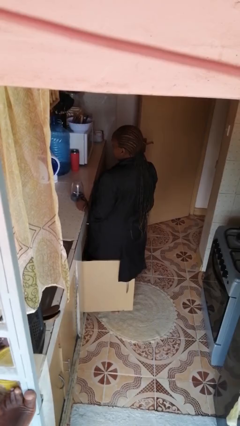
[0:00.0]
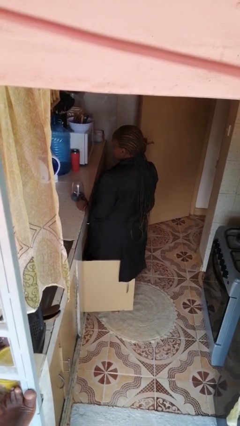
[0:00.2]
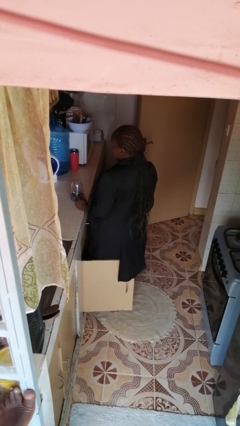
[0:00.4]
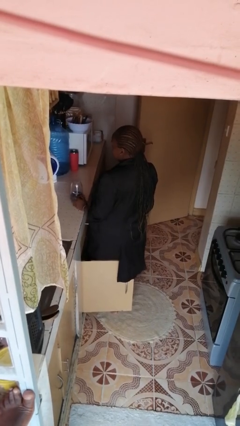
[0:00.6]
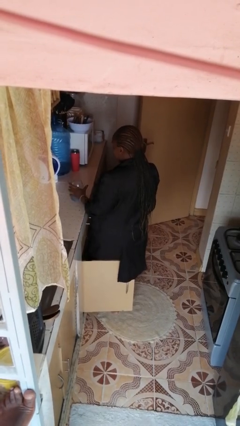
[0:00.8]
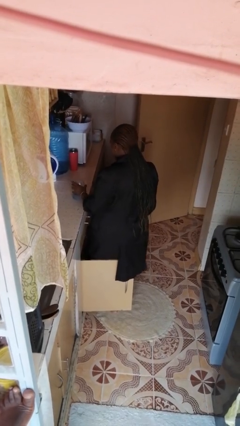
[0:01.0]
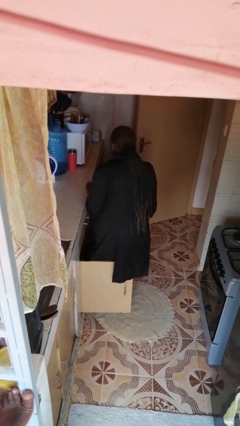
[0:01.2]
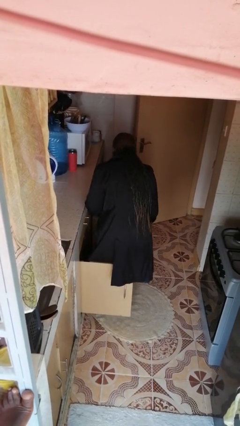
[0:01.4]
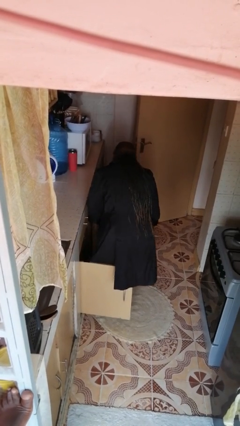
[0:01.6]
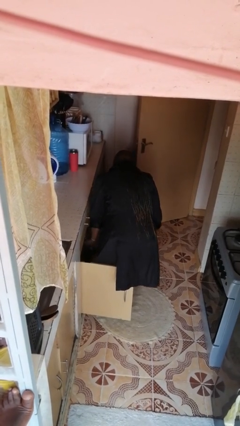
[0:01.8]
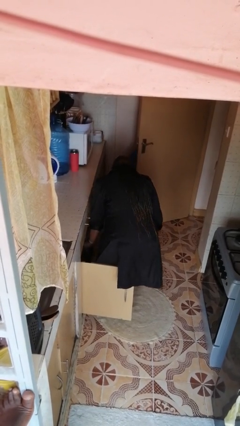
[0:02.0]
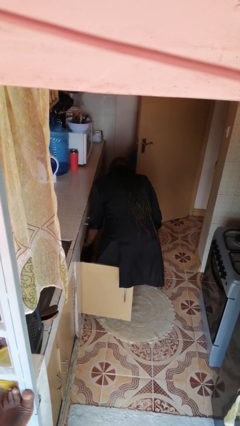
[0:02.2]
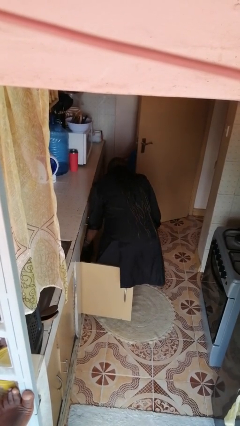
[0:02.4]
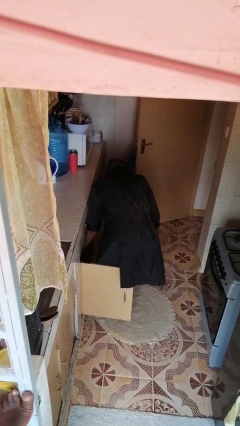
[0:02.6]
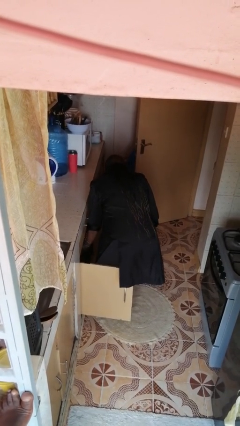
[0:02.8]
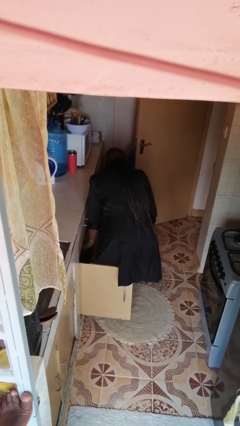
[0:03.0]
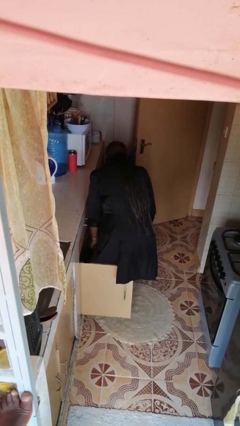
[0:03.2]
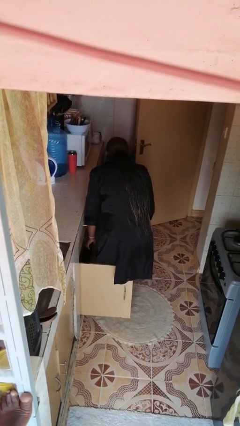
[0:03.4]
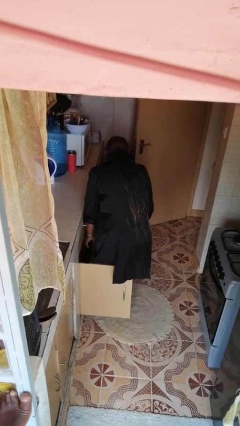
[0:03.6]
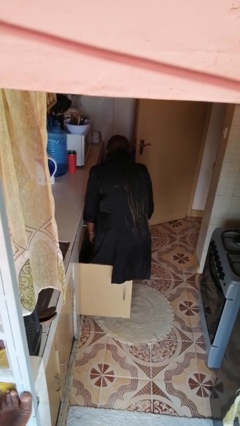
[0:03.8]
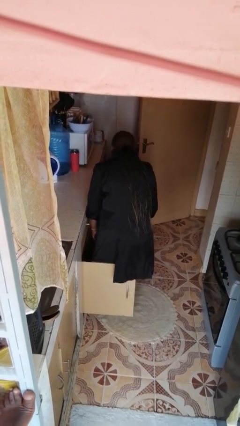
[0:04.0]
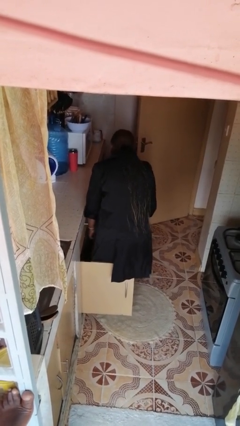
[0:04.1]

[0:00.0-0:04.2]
person puts object in cabinet

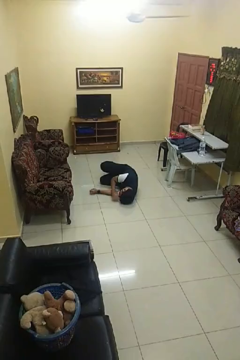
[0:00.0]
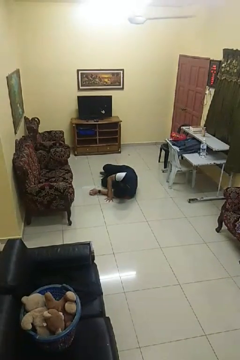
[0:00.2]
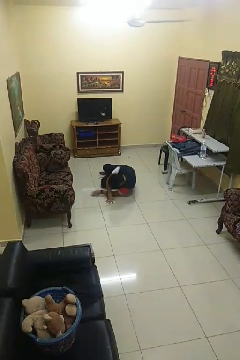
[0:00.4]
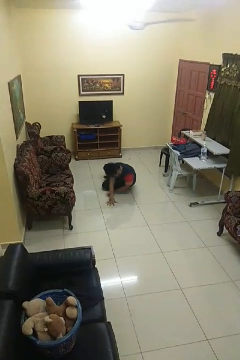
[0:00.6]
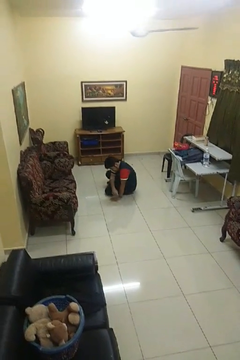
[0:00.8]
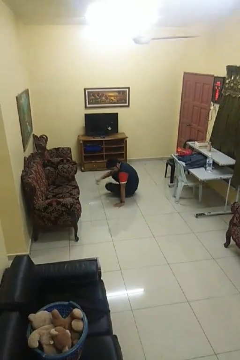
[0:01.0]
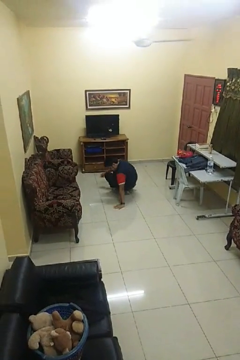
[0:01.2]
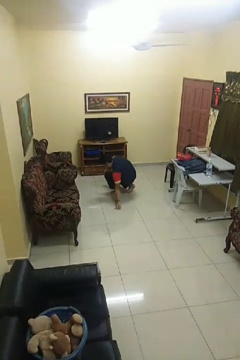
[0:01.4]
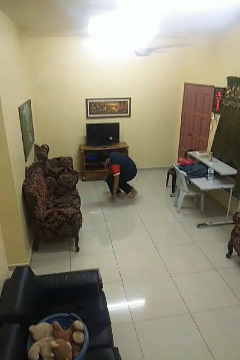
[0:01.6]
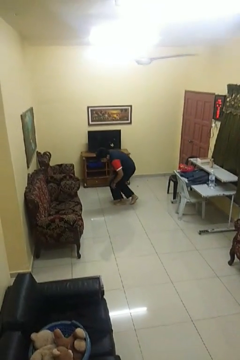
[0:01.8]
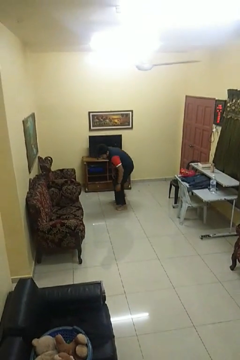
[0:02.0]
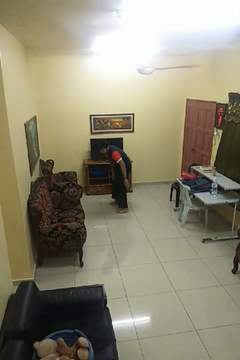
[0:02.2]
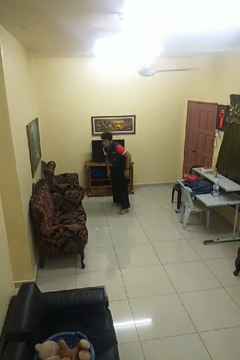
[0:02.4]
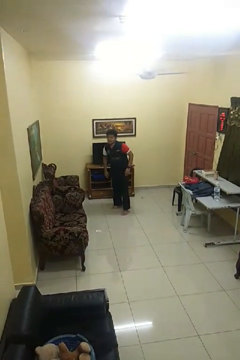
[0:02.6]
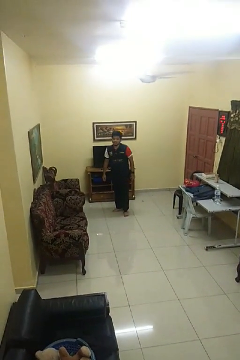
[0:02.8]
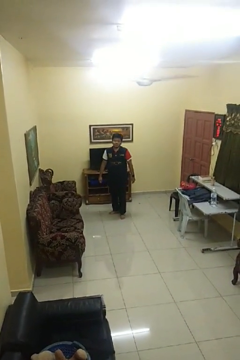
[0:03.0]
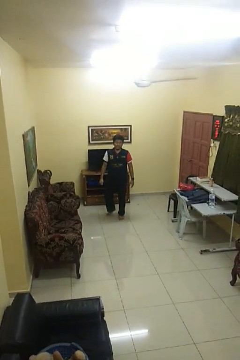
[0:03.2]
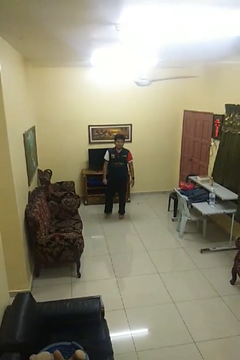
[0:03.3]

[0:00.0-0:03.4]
person stands up from floor

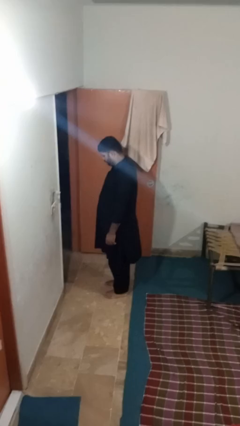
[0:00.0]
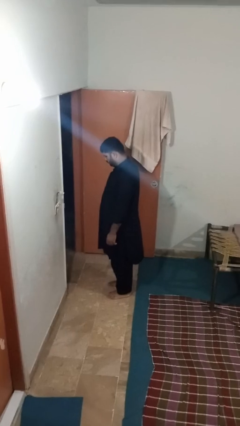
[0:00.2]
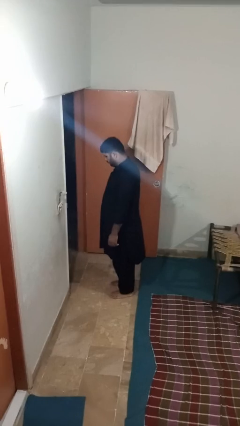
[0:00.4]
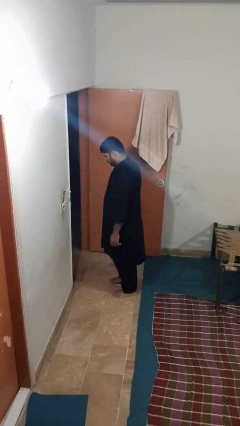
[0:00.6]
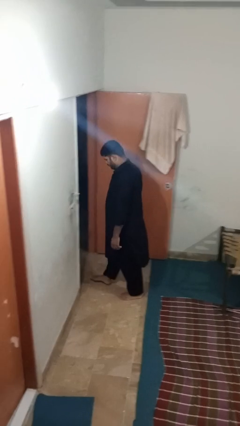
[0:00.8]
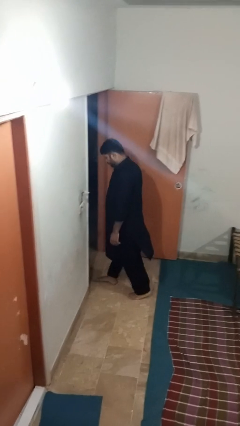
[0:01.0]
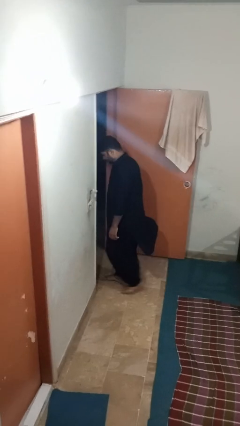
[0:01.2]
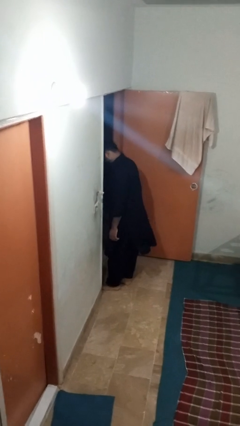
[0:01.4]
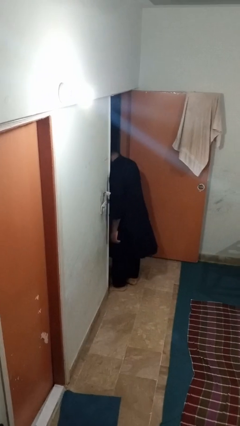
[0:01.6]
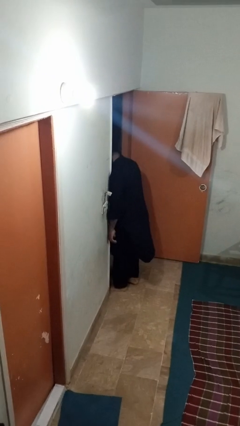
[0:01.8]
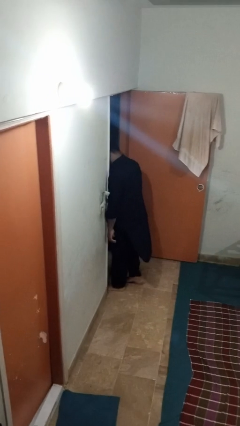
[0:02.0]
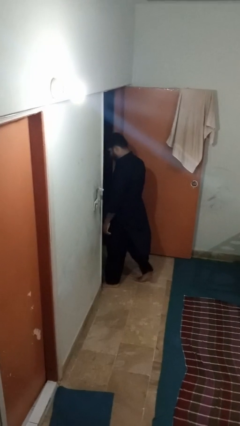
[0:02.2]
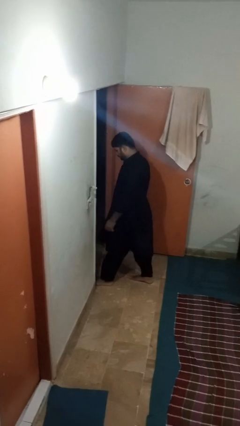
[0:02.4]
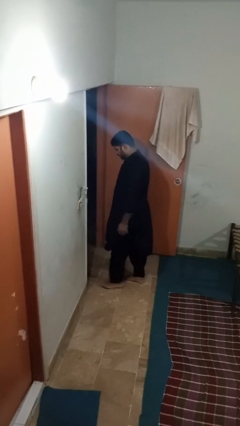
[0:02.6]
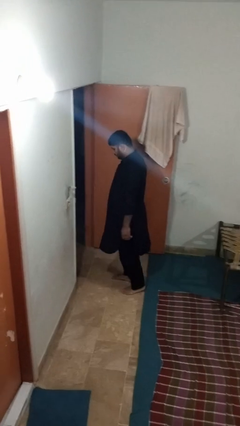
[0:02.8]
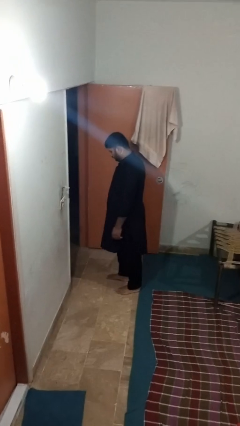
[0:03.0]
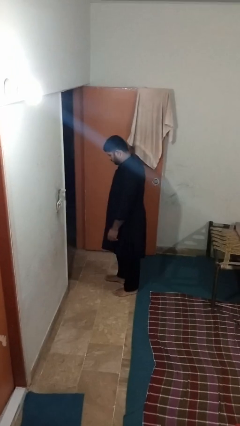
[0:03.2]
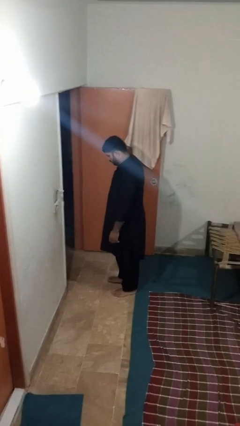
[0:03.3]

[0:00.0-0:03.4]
person bumps into wall

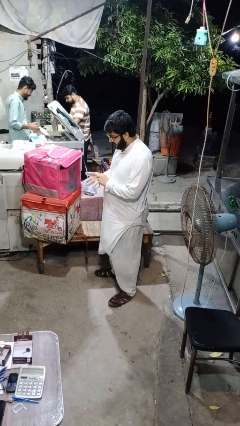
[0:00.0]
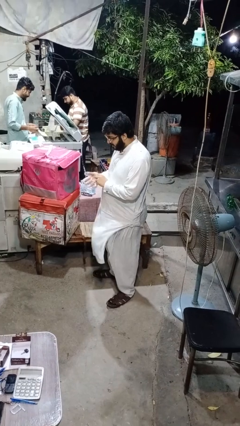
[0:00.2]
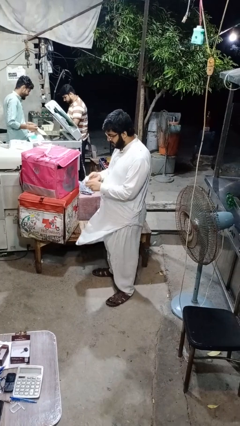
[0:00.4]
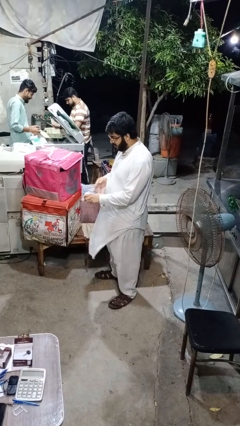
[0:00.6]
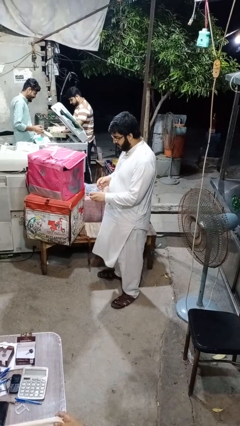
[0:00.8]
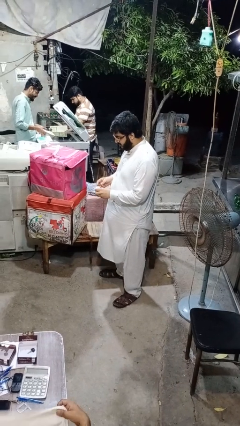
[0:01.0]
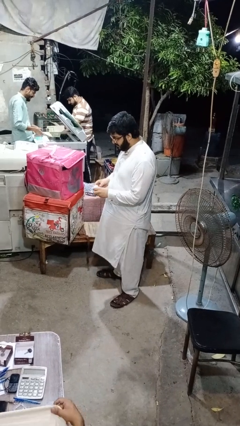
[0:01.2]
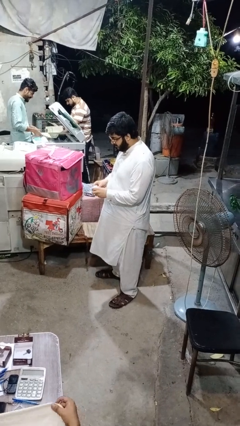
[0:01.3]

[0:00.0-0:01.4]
person takes off gloves

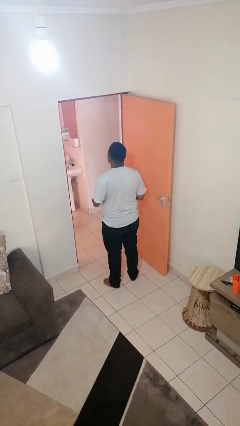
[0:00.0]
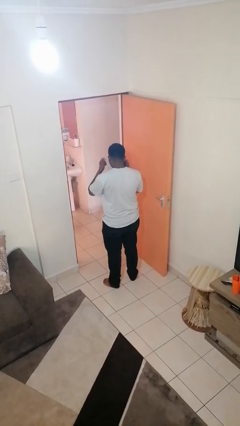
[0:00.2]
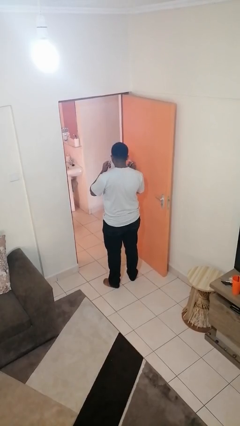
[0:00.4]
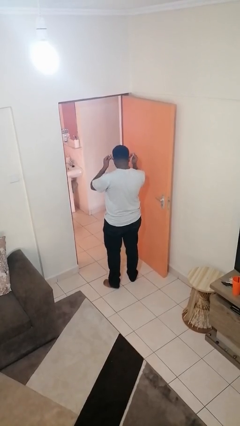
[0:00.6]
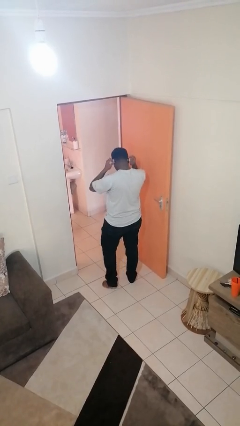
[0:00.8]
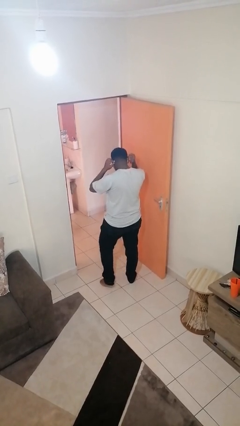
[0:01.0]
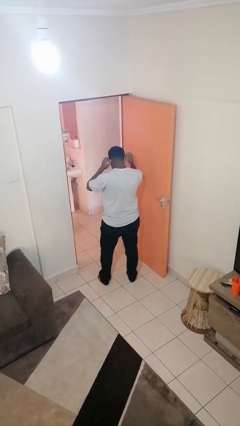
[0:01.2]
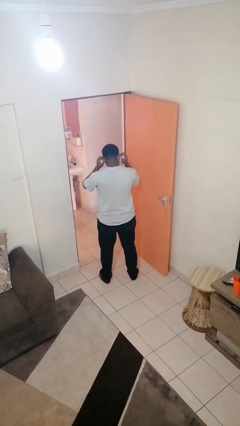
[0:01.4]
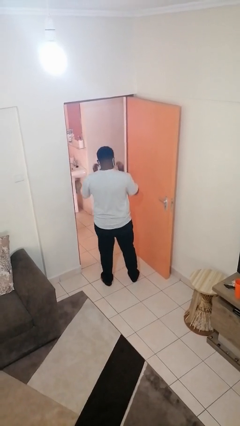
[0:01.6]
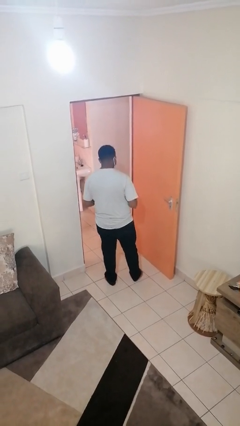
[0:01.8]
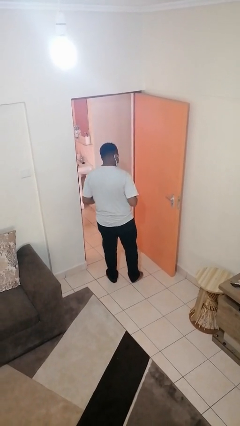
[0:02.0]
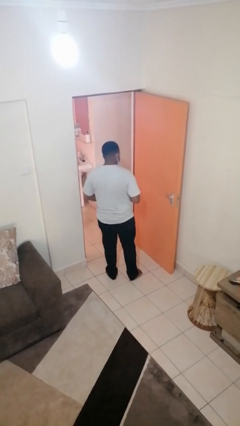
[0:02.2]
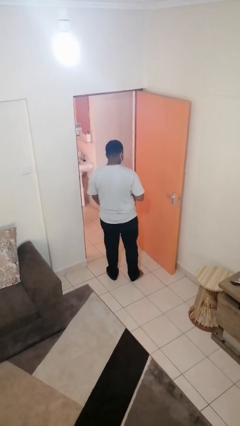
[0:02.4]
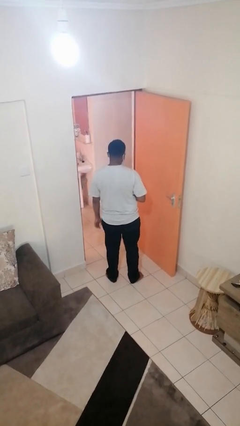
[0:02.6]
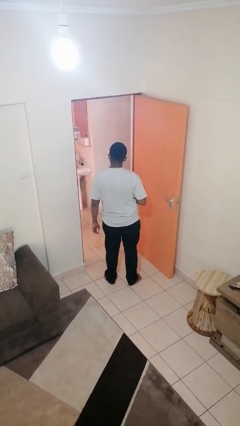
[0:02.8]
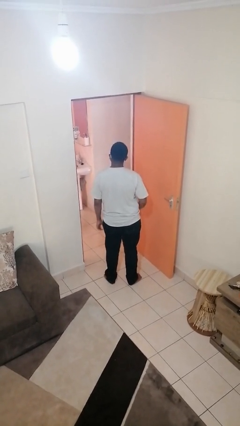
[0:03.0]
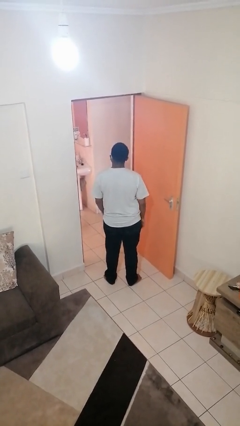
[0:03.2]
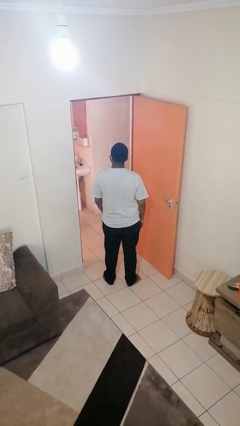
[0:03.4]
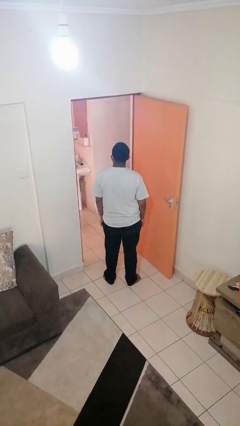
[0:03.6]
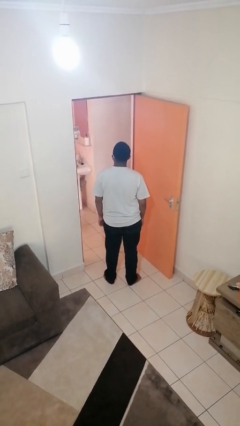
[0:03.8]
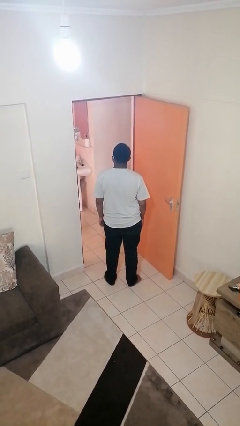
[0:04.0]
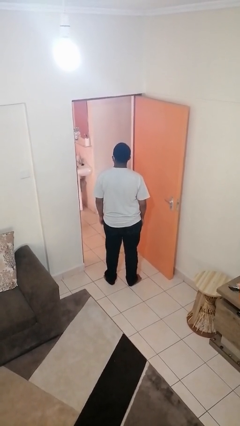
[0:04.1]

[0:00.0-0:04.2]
person puts on facemask

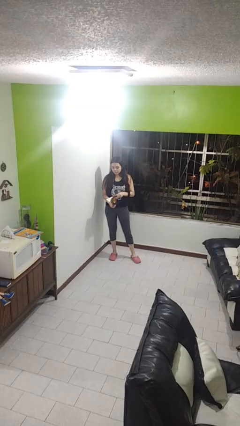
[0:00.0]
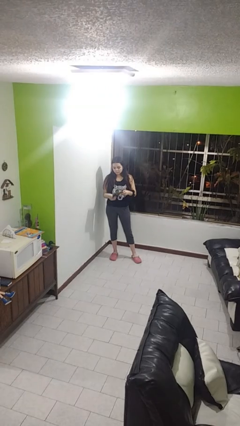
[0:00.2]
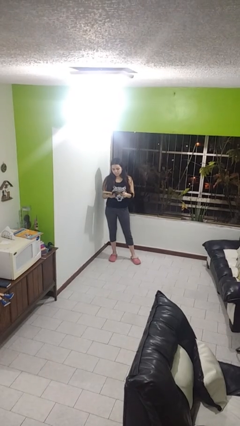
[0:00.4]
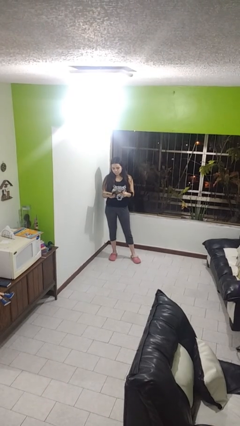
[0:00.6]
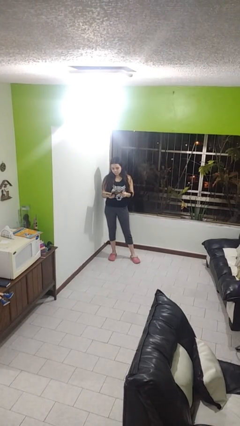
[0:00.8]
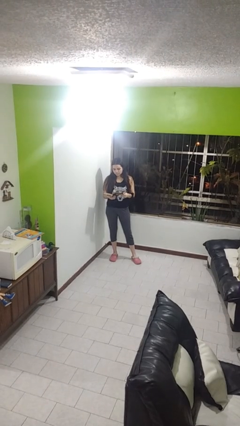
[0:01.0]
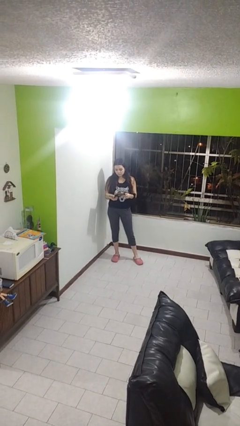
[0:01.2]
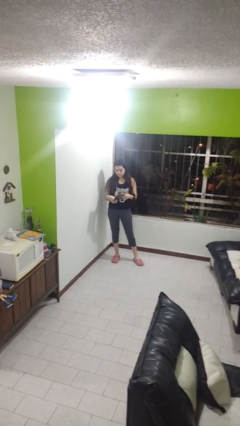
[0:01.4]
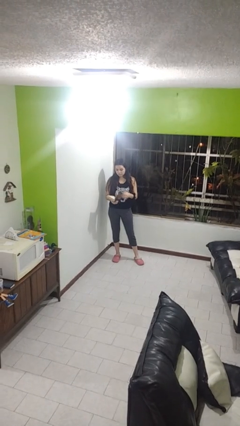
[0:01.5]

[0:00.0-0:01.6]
person reads book
